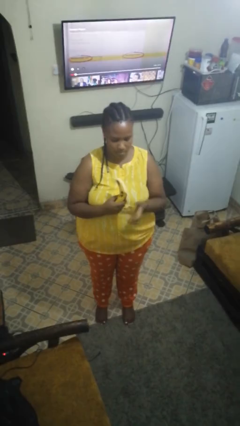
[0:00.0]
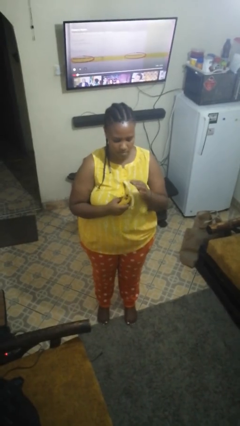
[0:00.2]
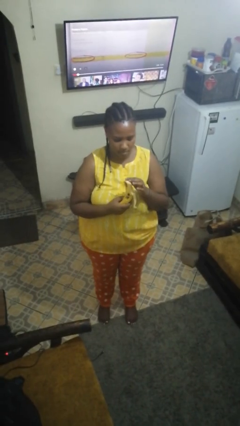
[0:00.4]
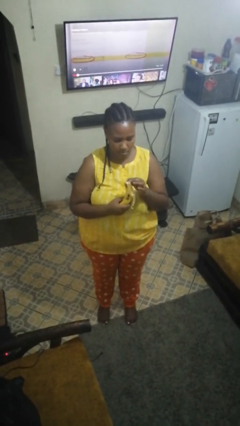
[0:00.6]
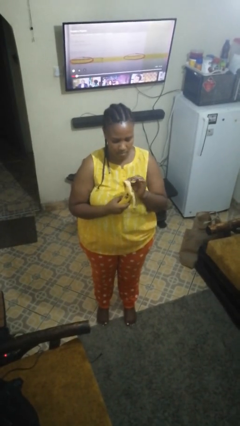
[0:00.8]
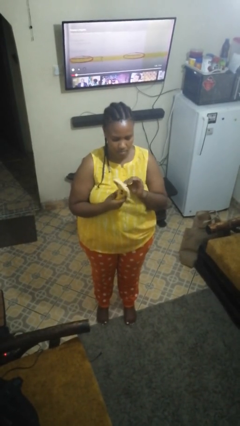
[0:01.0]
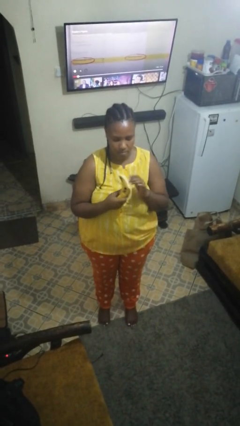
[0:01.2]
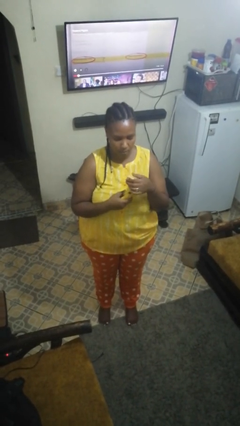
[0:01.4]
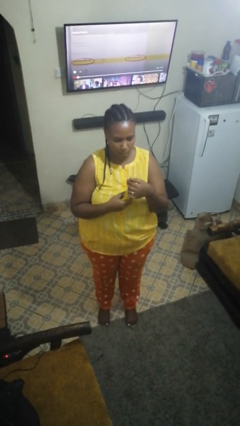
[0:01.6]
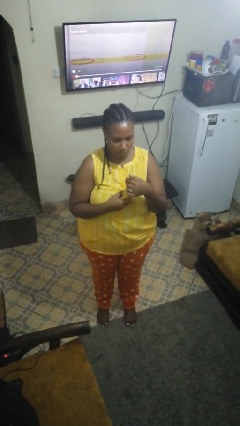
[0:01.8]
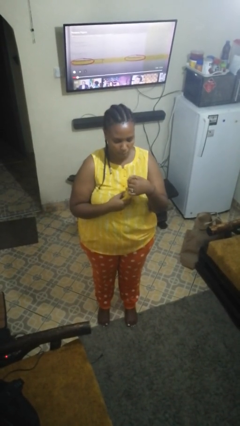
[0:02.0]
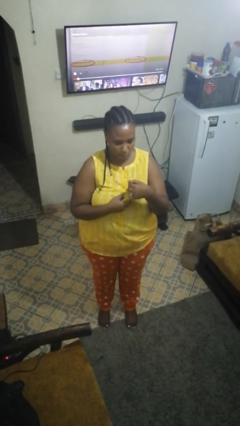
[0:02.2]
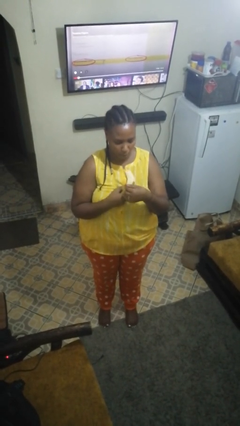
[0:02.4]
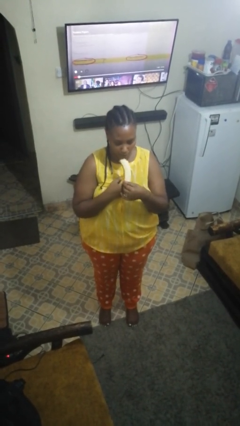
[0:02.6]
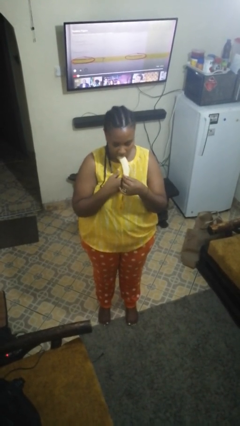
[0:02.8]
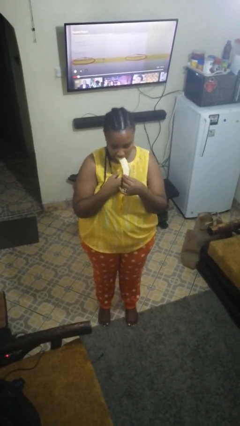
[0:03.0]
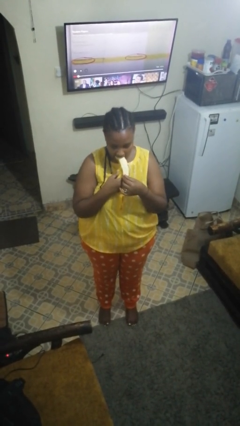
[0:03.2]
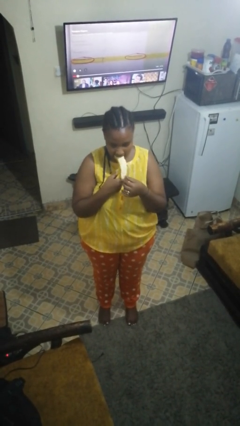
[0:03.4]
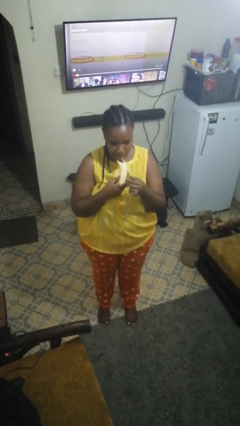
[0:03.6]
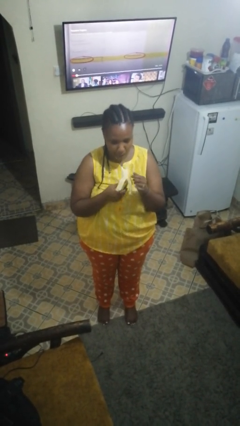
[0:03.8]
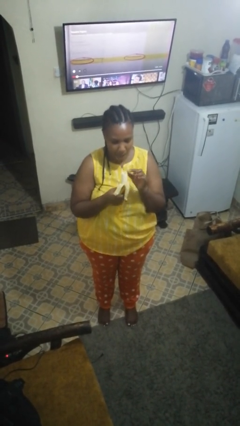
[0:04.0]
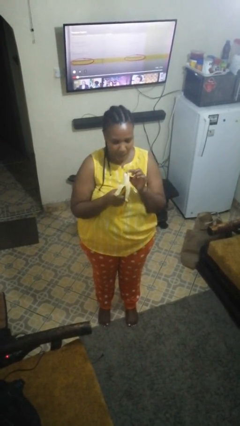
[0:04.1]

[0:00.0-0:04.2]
person eats banana

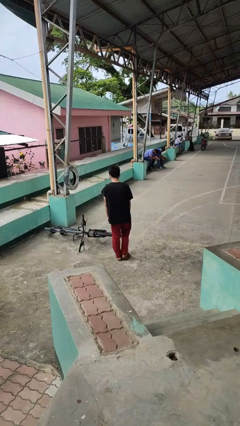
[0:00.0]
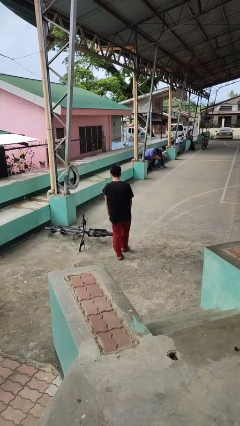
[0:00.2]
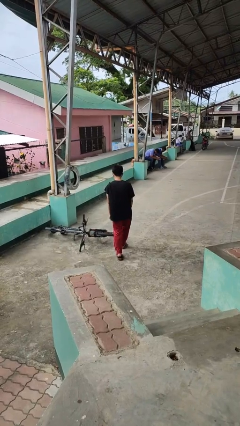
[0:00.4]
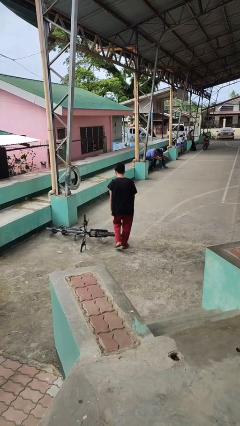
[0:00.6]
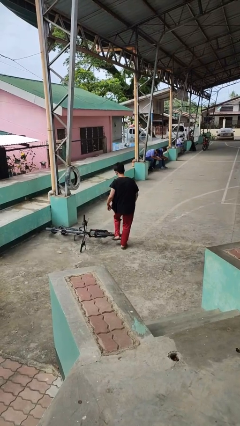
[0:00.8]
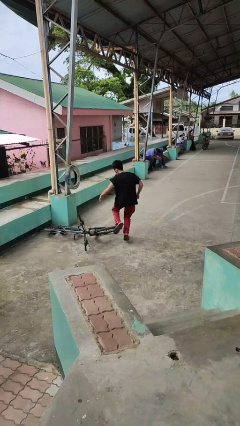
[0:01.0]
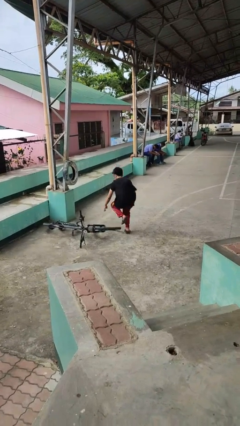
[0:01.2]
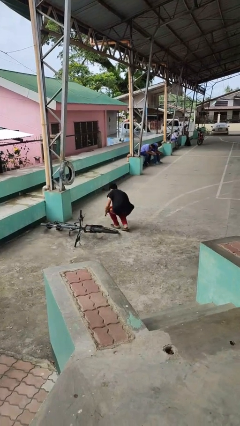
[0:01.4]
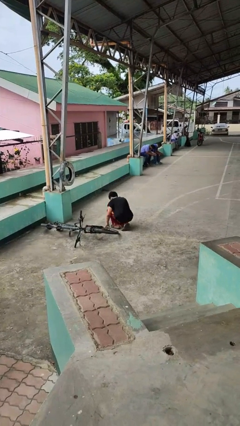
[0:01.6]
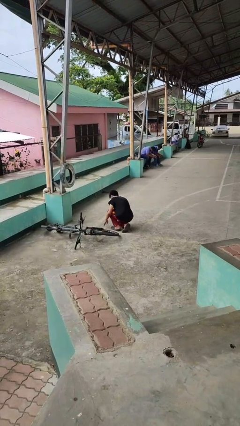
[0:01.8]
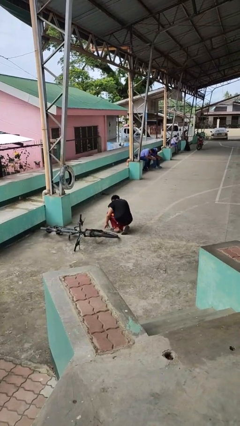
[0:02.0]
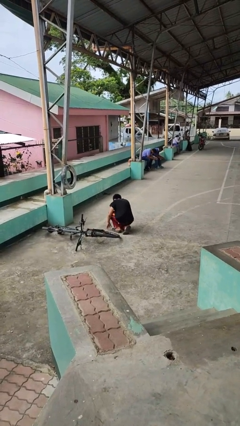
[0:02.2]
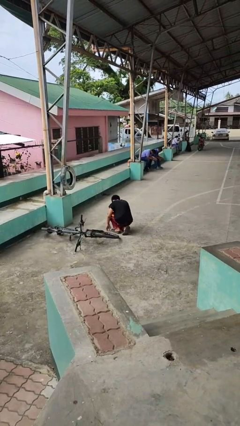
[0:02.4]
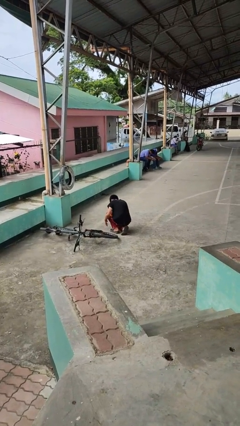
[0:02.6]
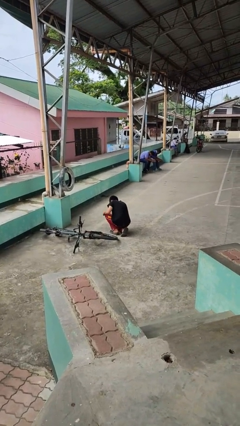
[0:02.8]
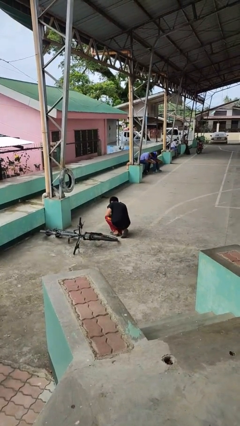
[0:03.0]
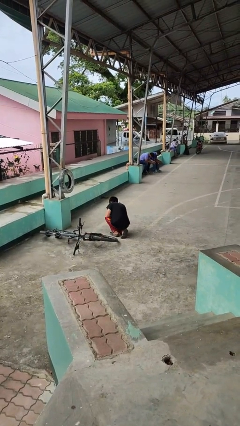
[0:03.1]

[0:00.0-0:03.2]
person trips on object on floor

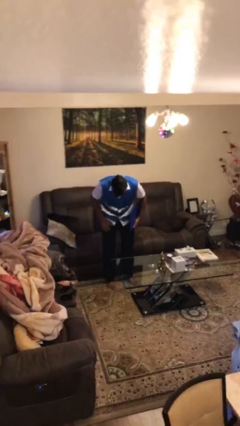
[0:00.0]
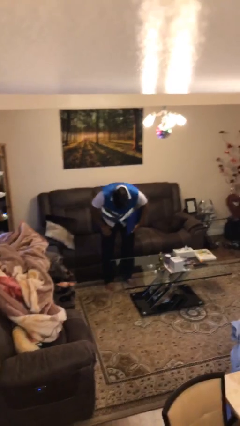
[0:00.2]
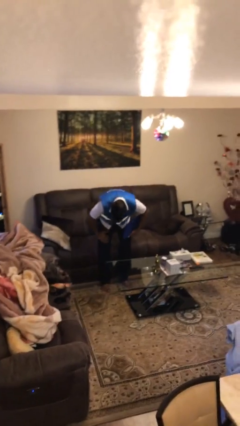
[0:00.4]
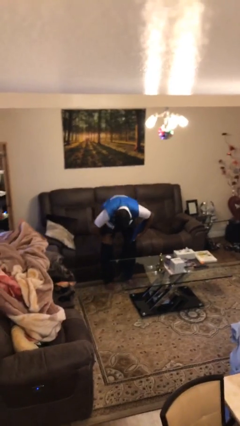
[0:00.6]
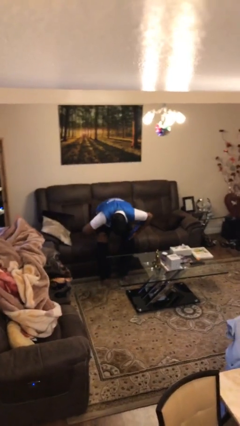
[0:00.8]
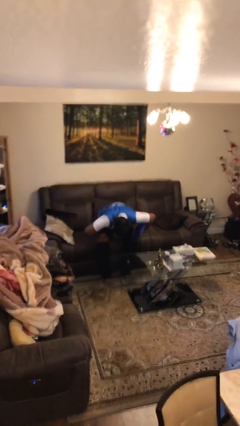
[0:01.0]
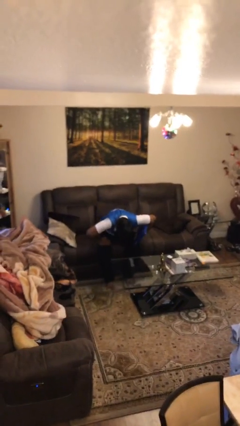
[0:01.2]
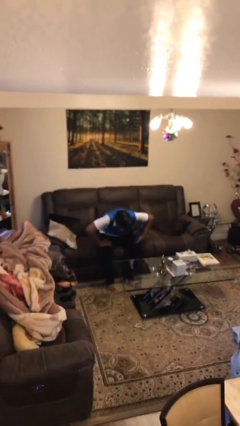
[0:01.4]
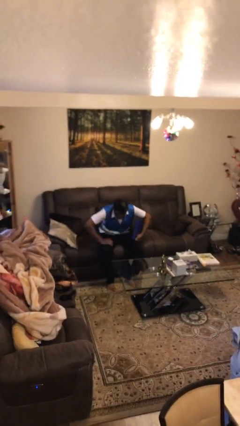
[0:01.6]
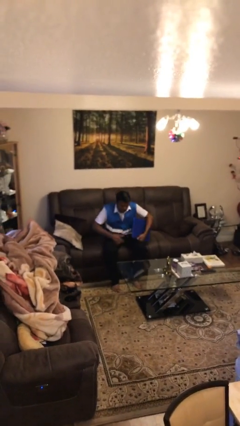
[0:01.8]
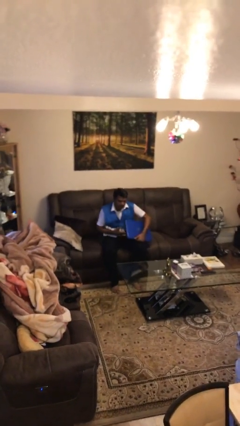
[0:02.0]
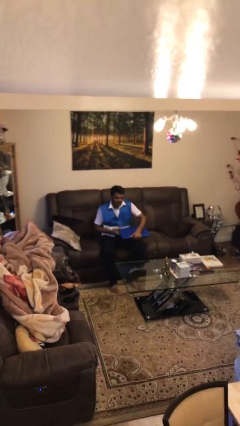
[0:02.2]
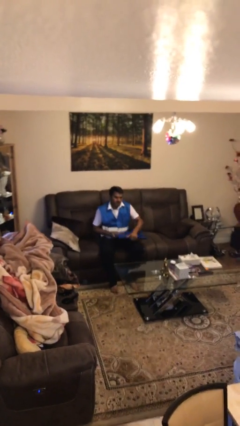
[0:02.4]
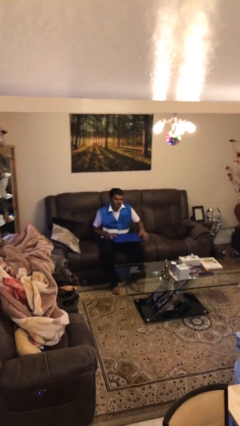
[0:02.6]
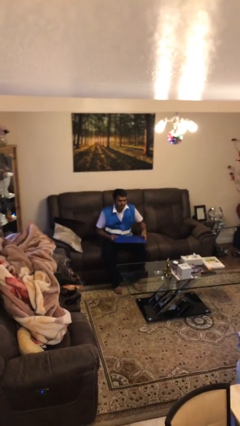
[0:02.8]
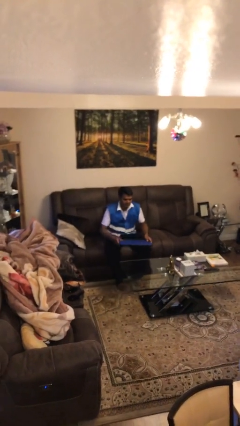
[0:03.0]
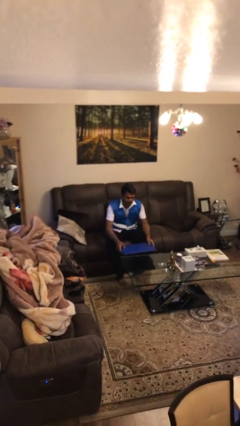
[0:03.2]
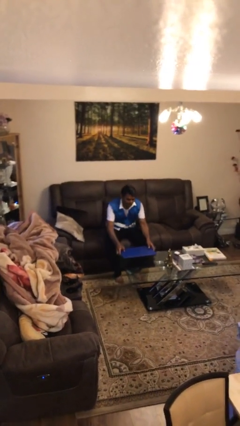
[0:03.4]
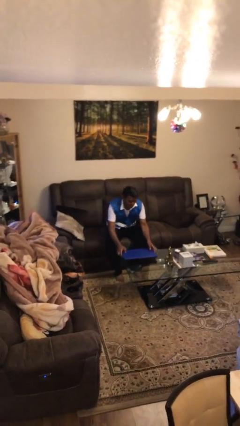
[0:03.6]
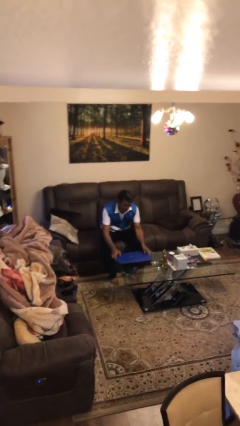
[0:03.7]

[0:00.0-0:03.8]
person sits down

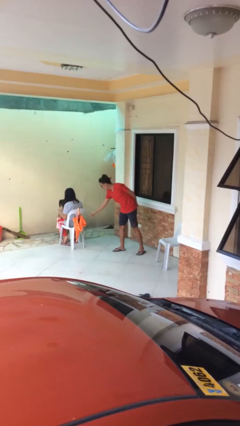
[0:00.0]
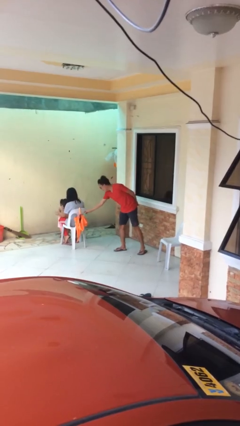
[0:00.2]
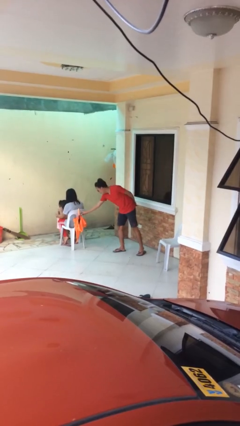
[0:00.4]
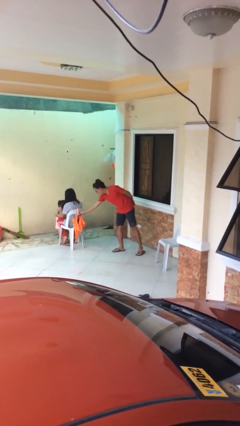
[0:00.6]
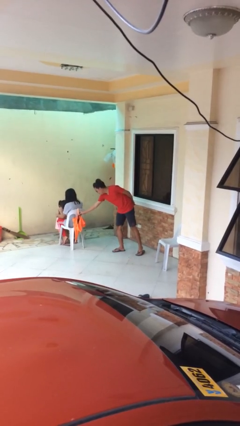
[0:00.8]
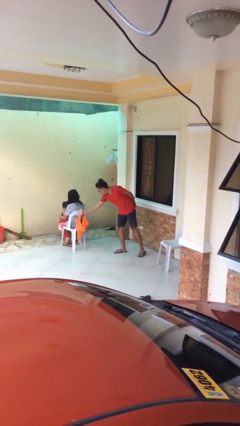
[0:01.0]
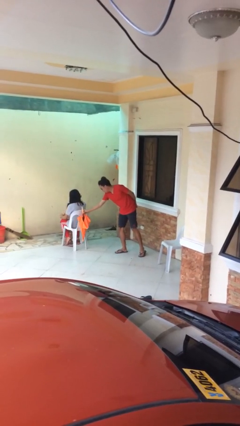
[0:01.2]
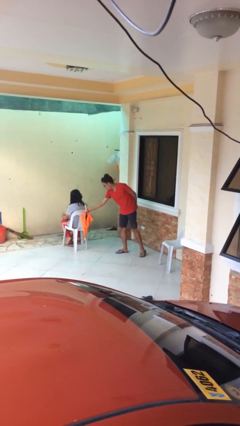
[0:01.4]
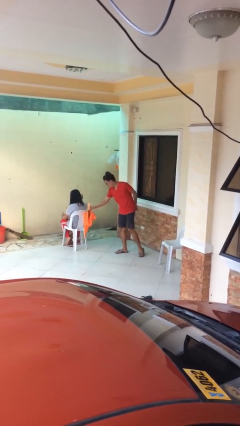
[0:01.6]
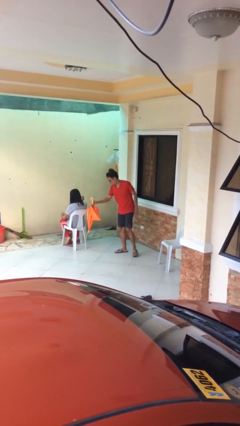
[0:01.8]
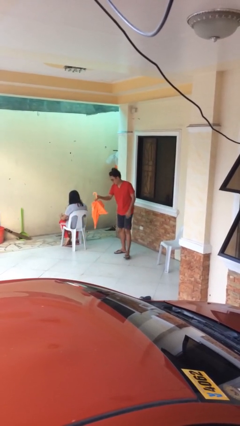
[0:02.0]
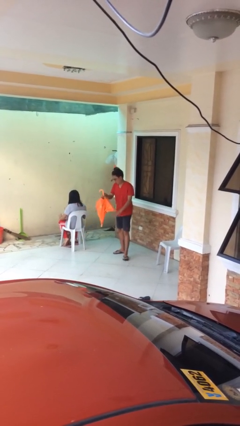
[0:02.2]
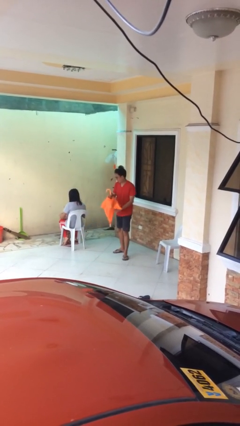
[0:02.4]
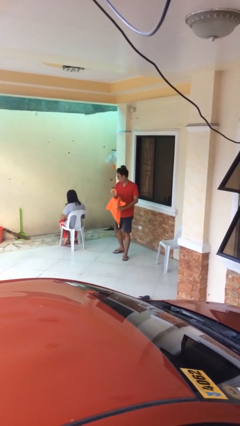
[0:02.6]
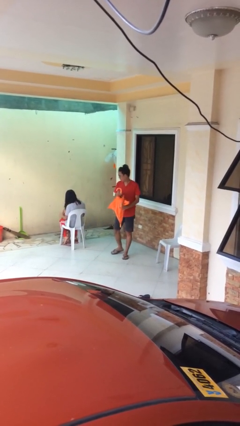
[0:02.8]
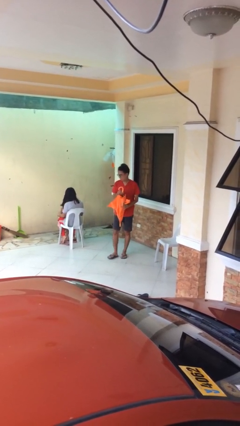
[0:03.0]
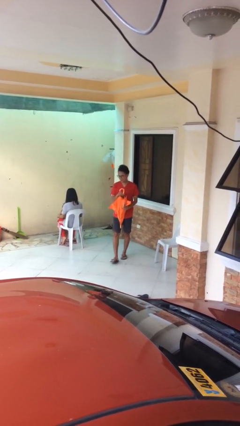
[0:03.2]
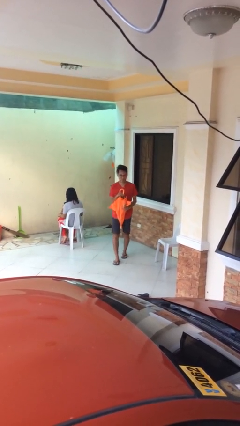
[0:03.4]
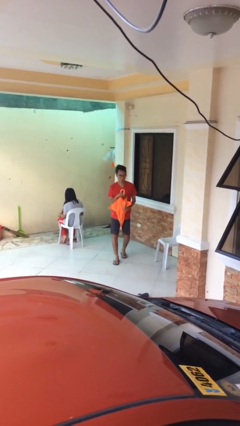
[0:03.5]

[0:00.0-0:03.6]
person steals object from person

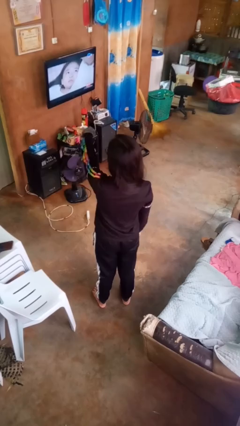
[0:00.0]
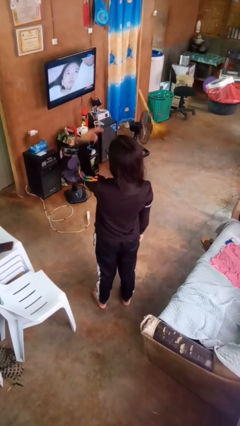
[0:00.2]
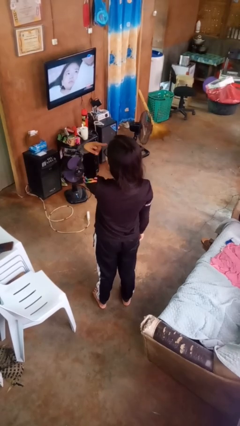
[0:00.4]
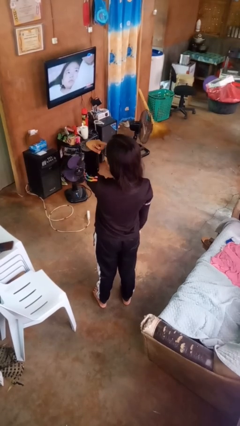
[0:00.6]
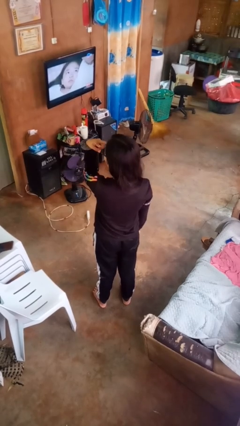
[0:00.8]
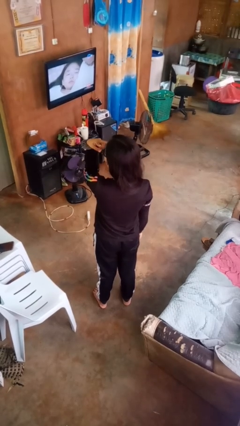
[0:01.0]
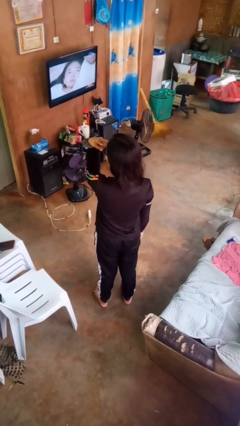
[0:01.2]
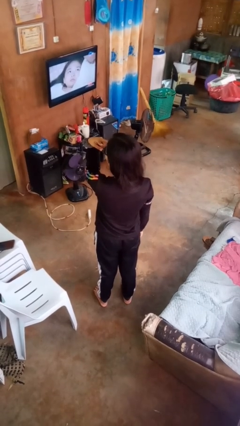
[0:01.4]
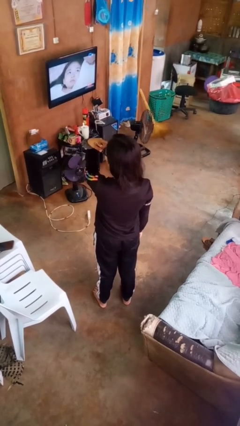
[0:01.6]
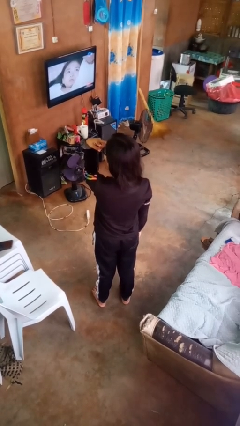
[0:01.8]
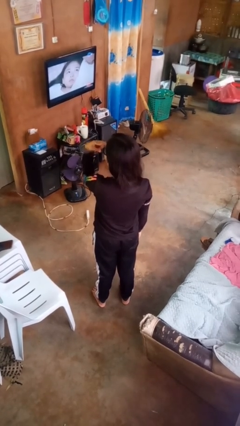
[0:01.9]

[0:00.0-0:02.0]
person gestures watch closely

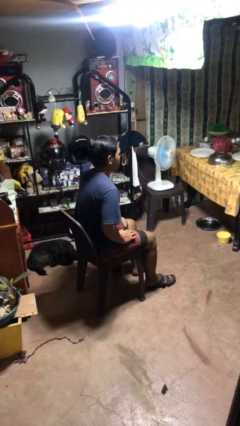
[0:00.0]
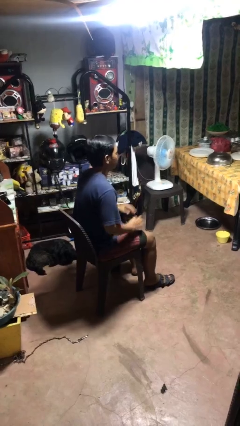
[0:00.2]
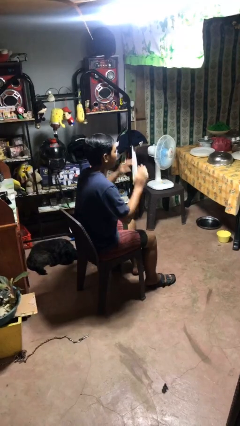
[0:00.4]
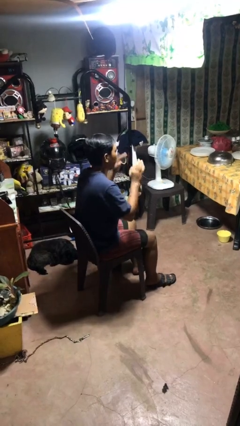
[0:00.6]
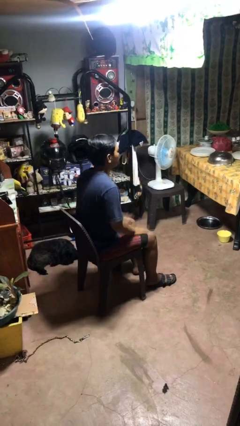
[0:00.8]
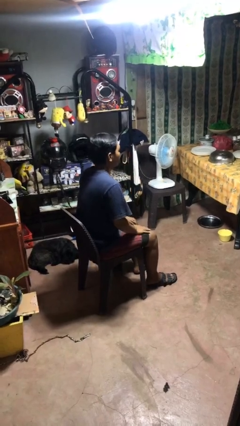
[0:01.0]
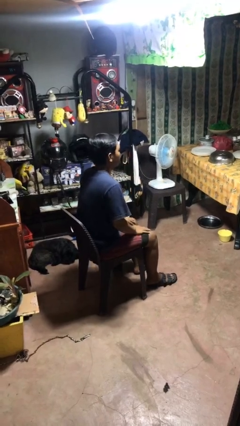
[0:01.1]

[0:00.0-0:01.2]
person slaps hands on thighs
